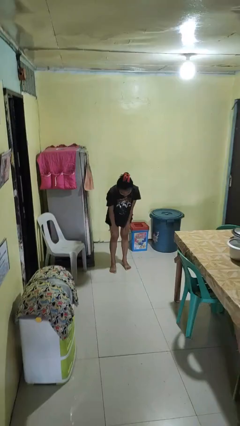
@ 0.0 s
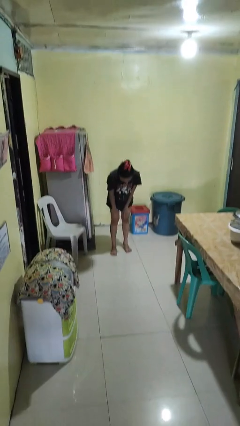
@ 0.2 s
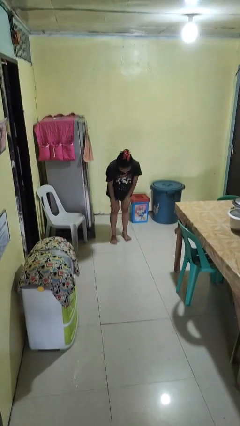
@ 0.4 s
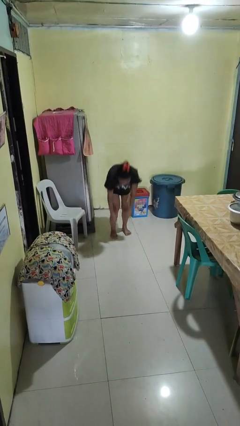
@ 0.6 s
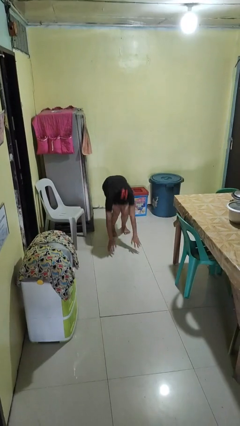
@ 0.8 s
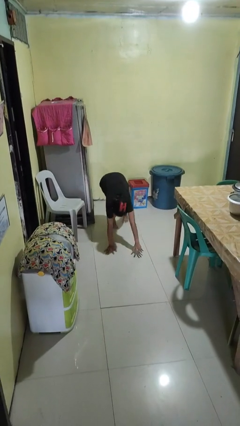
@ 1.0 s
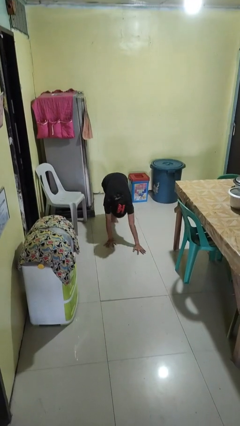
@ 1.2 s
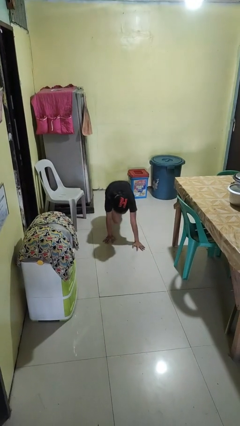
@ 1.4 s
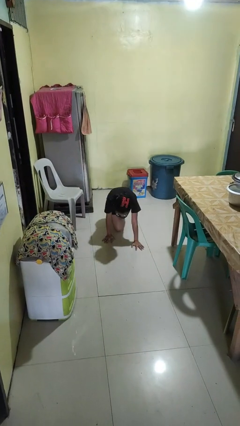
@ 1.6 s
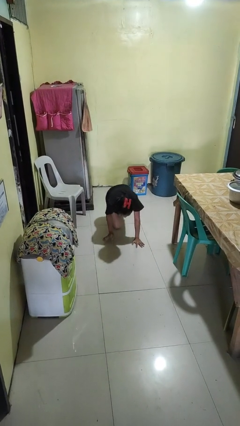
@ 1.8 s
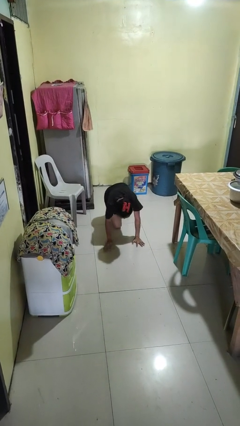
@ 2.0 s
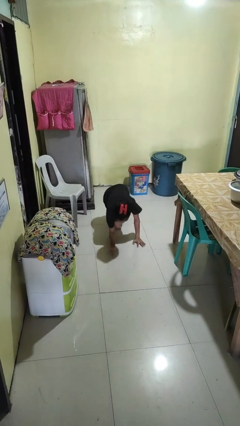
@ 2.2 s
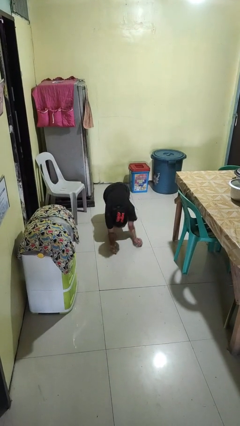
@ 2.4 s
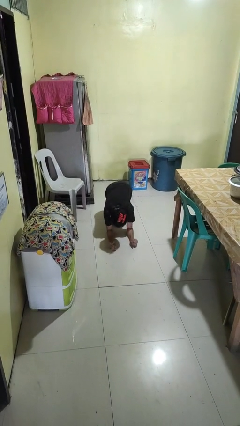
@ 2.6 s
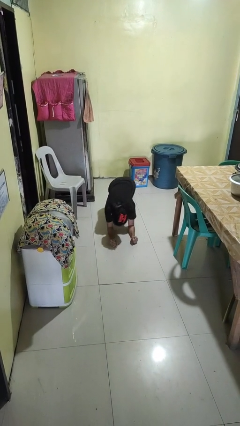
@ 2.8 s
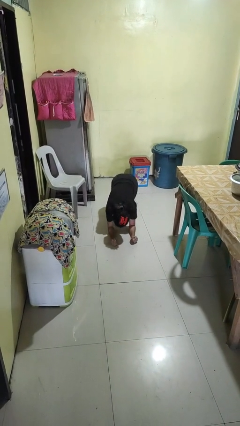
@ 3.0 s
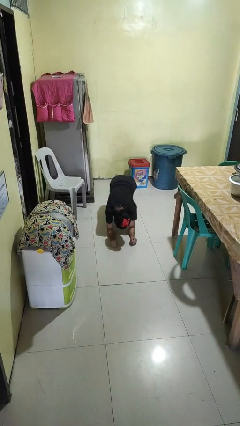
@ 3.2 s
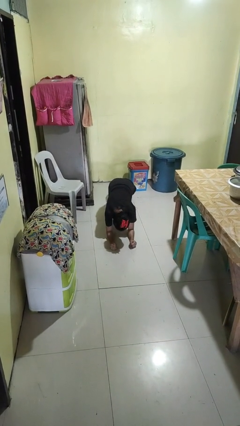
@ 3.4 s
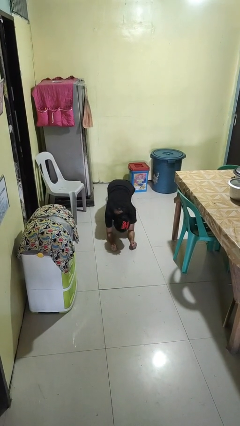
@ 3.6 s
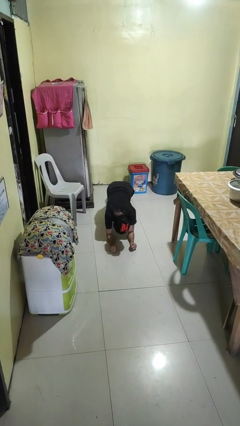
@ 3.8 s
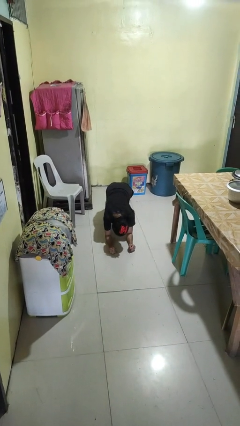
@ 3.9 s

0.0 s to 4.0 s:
person exercises with plank

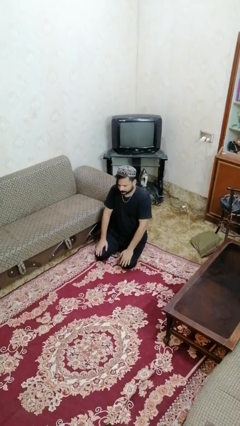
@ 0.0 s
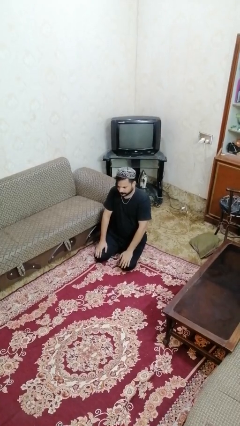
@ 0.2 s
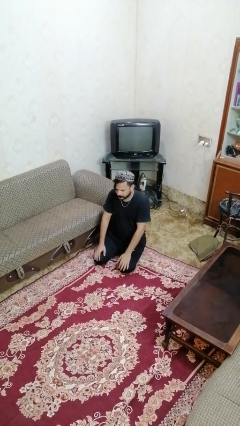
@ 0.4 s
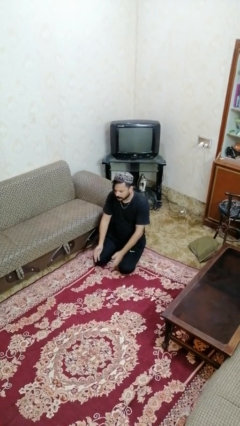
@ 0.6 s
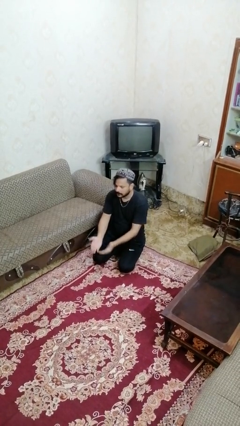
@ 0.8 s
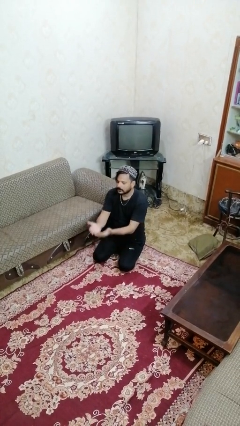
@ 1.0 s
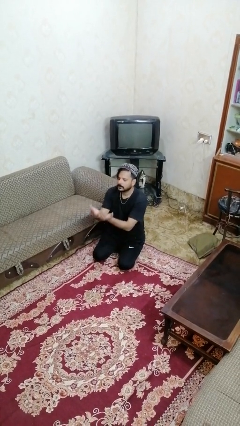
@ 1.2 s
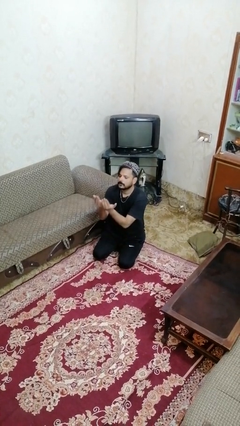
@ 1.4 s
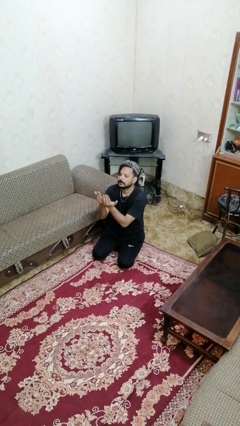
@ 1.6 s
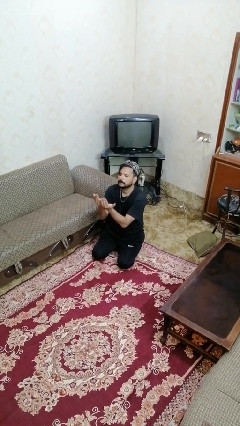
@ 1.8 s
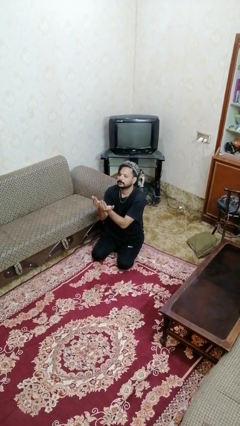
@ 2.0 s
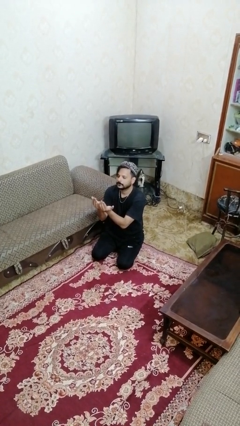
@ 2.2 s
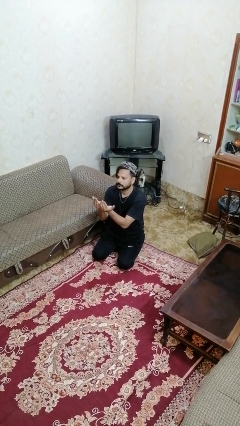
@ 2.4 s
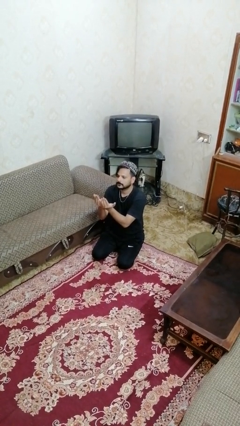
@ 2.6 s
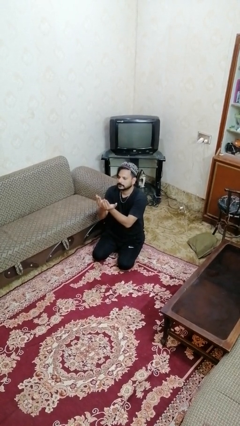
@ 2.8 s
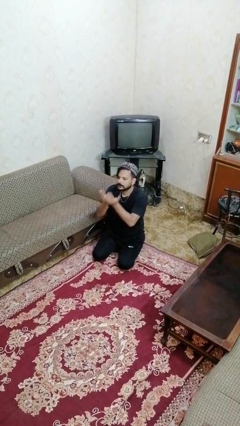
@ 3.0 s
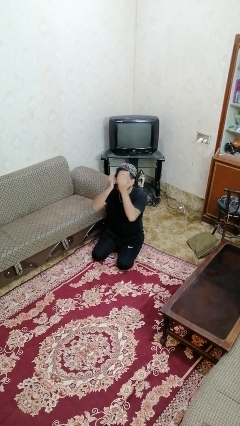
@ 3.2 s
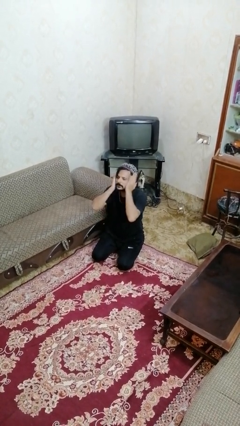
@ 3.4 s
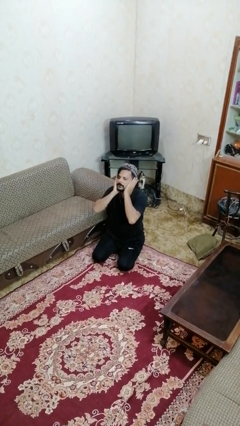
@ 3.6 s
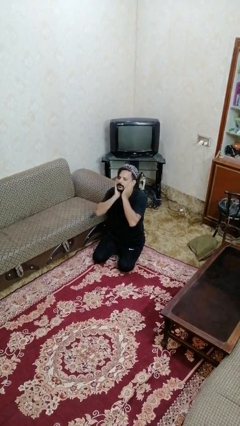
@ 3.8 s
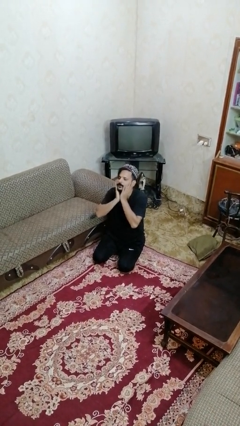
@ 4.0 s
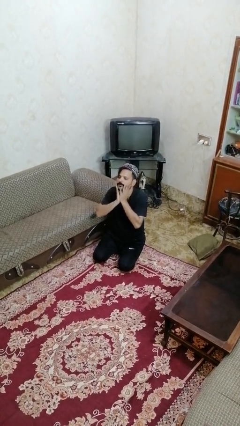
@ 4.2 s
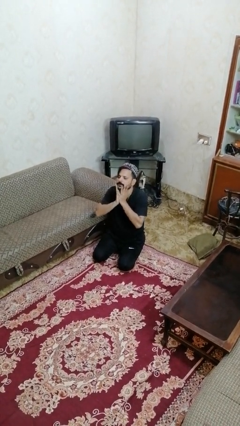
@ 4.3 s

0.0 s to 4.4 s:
person prays

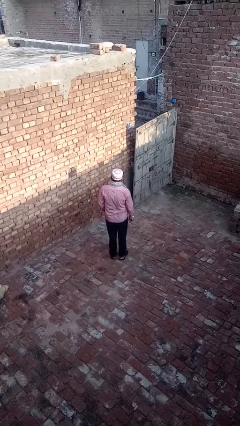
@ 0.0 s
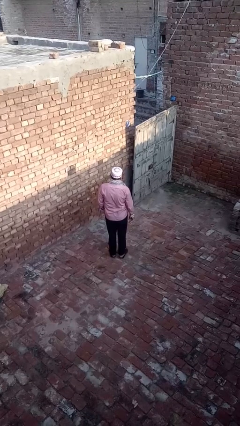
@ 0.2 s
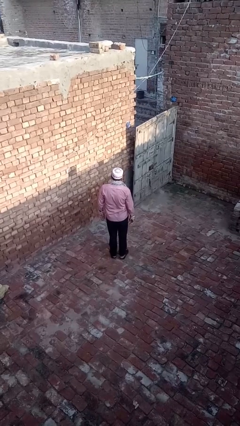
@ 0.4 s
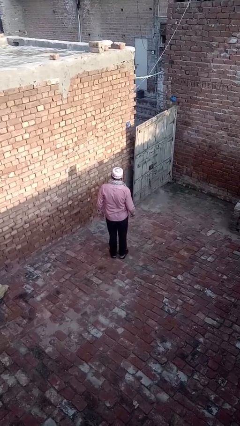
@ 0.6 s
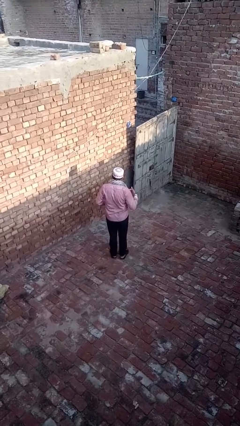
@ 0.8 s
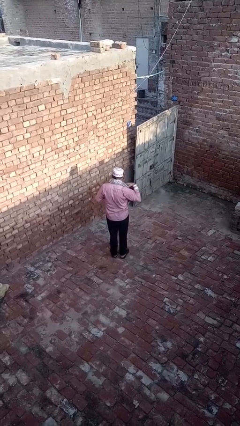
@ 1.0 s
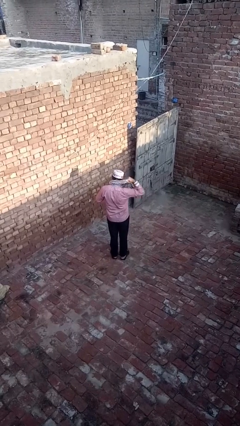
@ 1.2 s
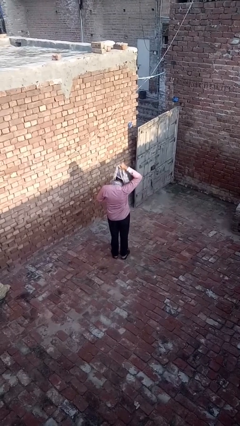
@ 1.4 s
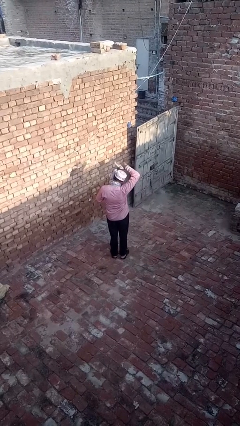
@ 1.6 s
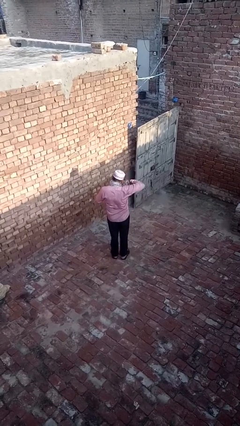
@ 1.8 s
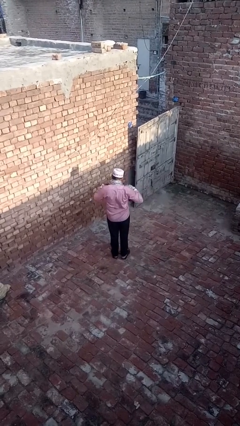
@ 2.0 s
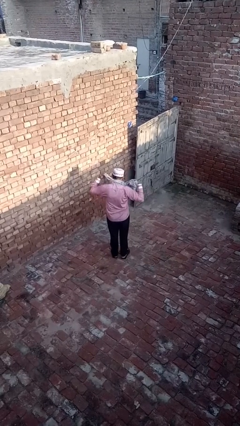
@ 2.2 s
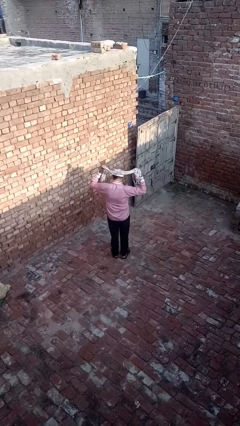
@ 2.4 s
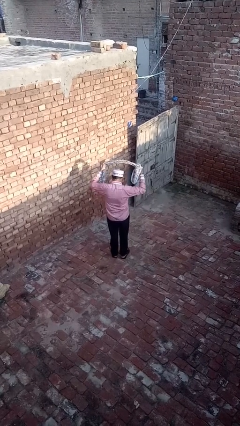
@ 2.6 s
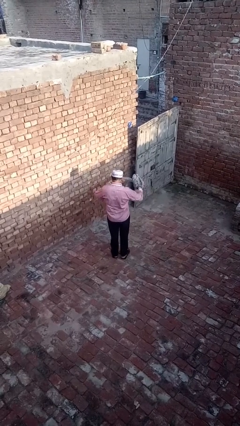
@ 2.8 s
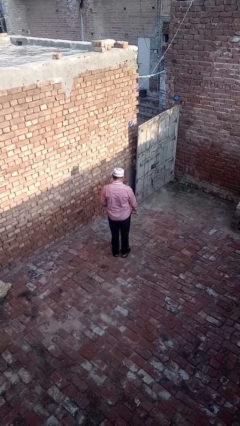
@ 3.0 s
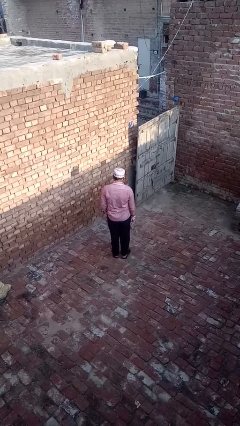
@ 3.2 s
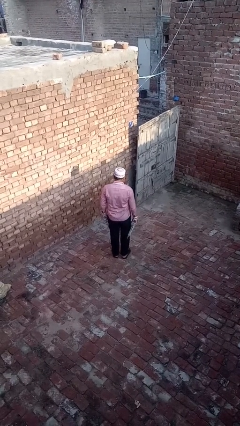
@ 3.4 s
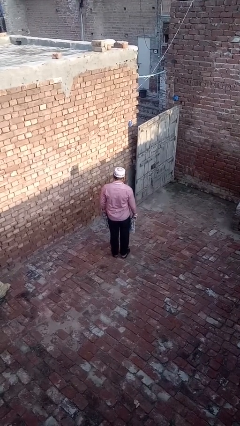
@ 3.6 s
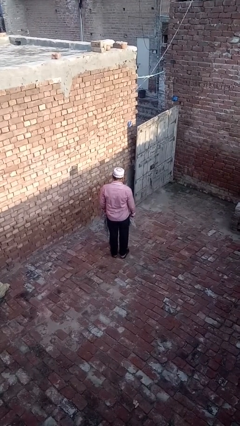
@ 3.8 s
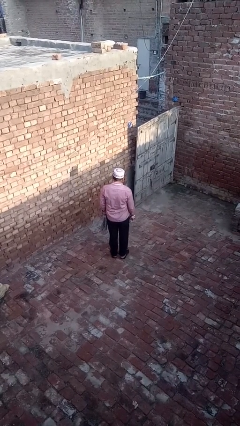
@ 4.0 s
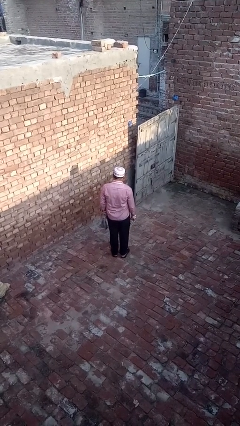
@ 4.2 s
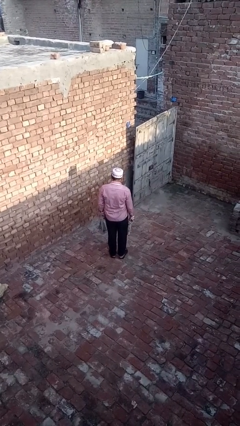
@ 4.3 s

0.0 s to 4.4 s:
person takes off scarf

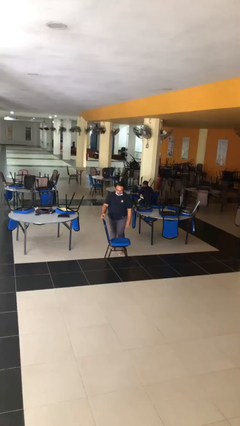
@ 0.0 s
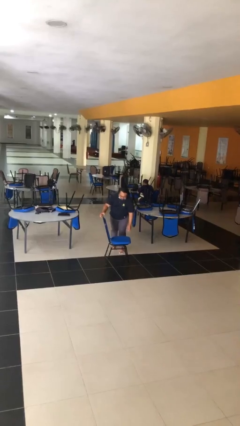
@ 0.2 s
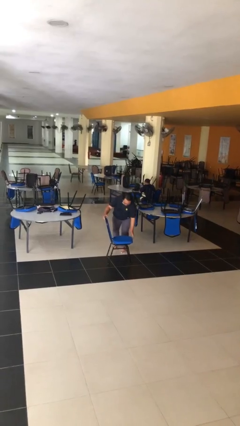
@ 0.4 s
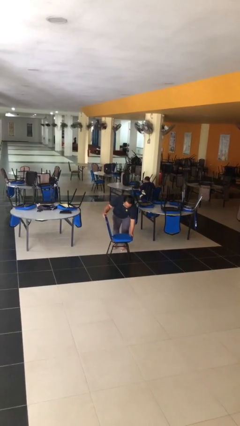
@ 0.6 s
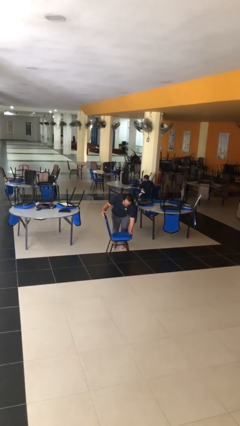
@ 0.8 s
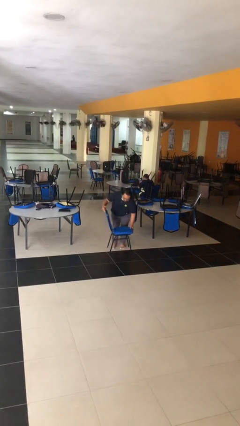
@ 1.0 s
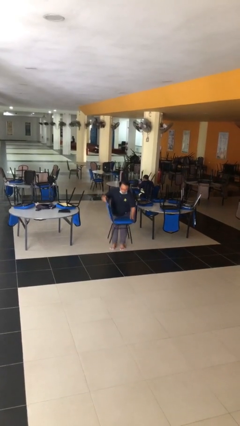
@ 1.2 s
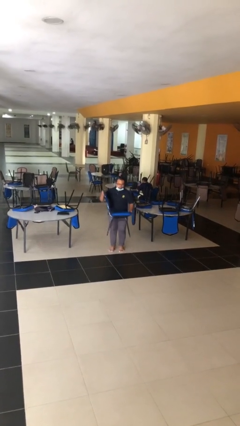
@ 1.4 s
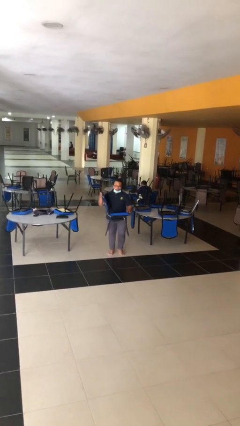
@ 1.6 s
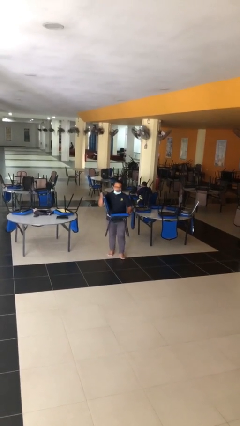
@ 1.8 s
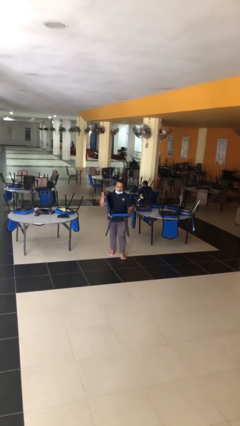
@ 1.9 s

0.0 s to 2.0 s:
person picks up object from floor

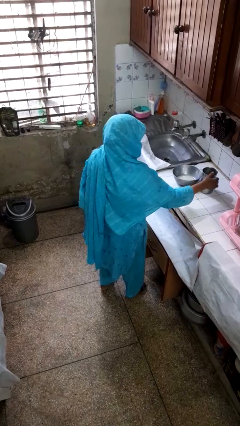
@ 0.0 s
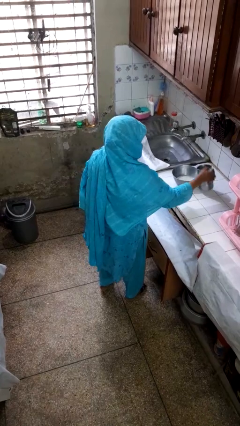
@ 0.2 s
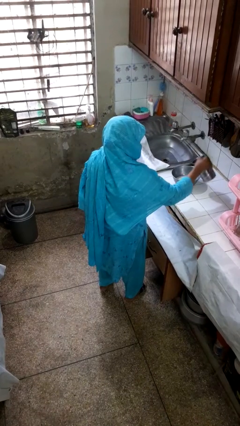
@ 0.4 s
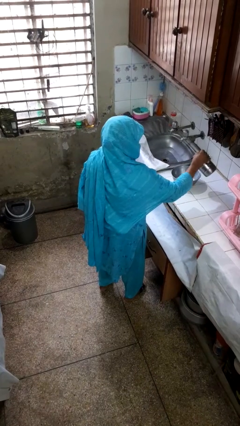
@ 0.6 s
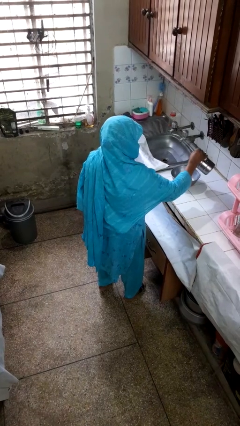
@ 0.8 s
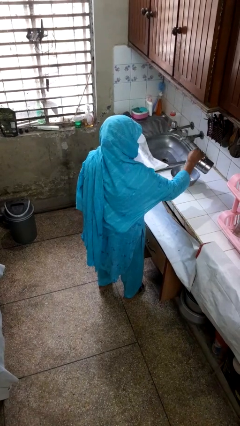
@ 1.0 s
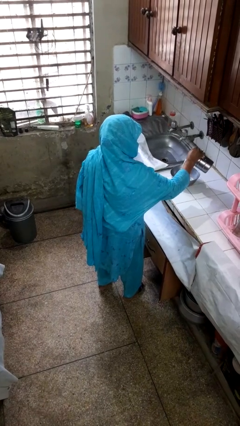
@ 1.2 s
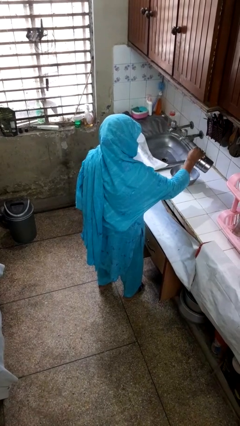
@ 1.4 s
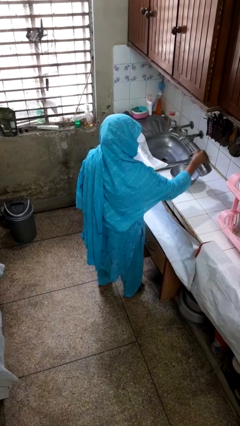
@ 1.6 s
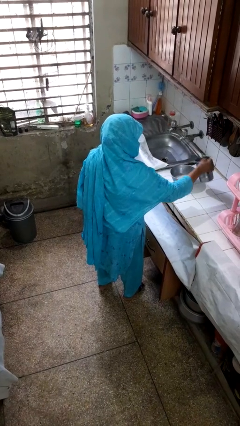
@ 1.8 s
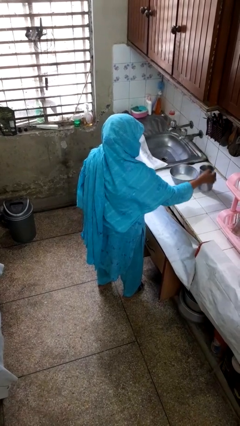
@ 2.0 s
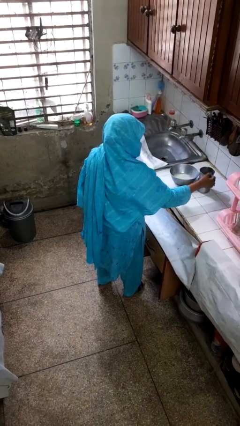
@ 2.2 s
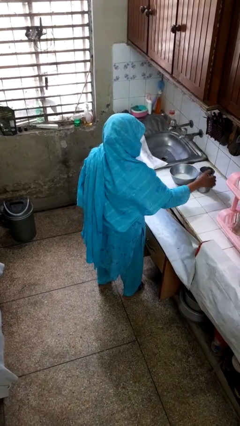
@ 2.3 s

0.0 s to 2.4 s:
person pours into bowl

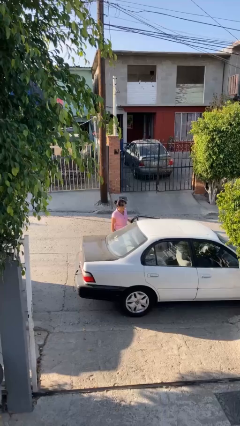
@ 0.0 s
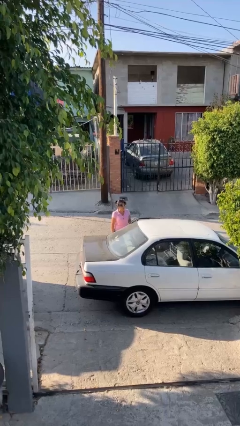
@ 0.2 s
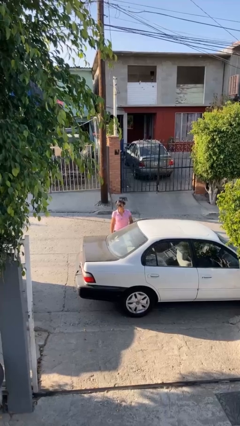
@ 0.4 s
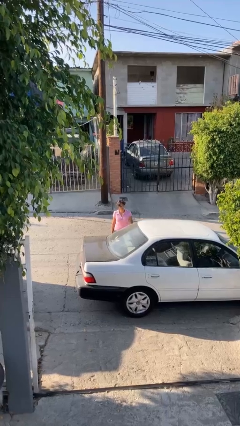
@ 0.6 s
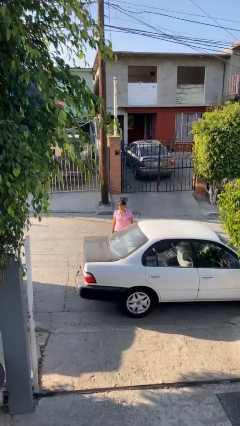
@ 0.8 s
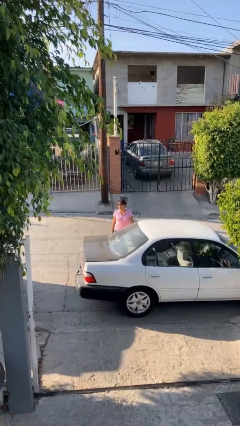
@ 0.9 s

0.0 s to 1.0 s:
person closes car door
